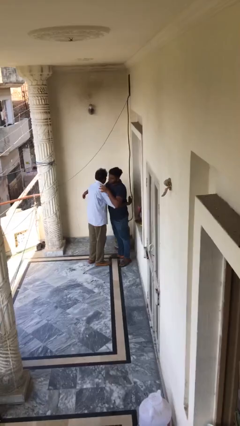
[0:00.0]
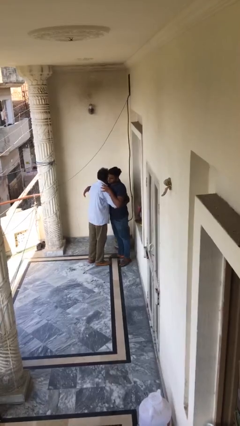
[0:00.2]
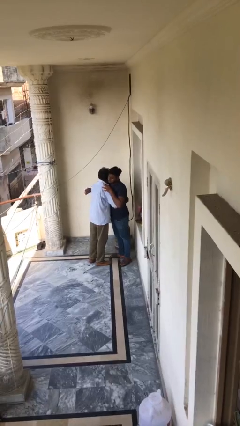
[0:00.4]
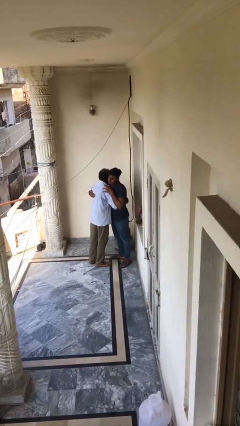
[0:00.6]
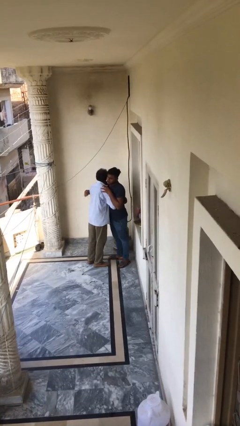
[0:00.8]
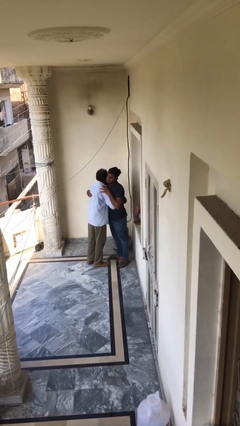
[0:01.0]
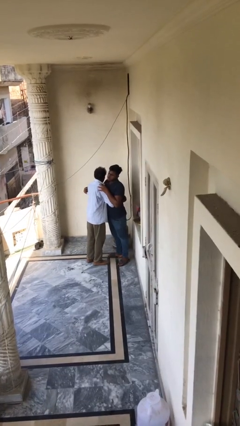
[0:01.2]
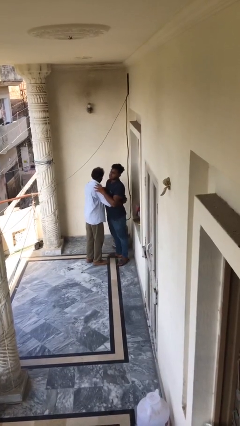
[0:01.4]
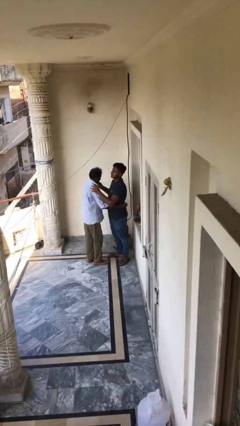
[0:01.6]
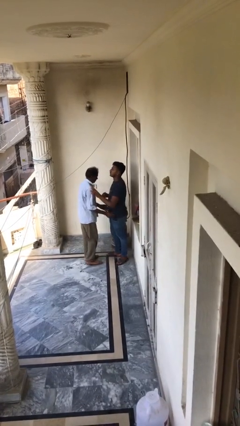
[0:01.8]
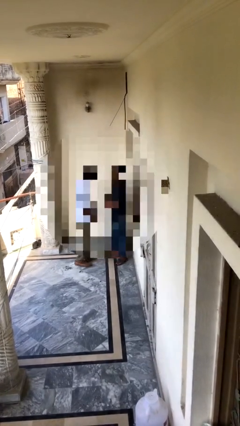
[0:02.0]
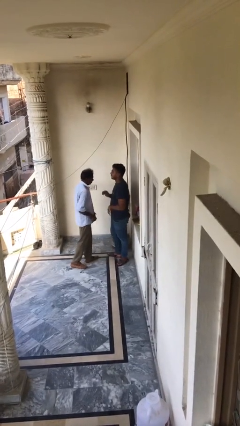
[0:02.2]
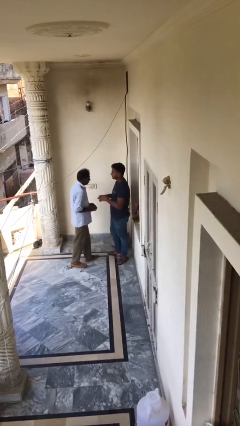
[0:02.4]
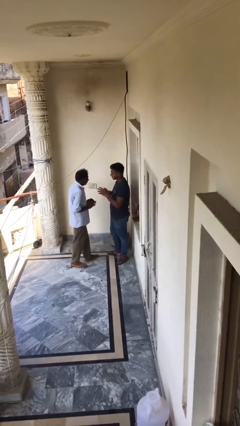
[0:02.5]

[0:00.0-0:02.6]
person embraces person

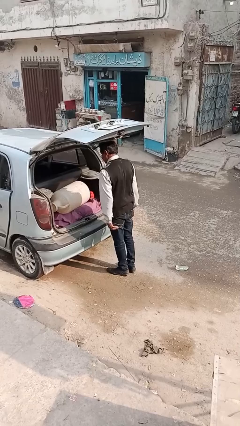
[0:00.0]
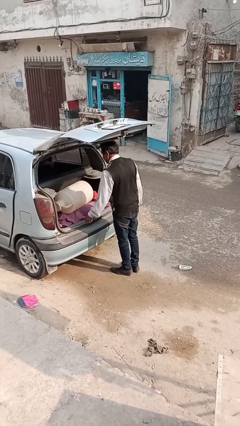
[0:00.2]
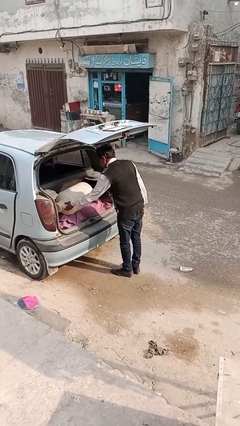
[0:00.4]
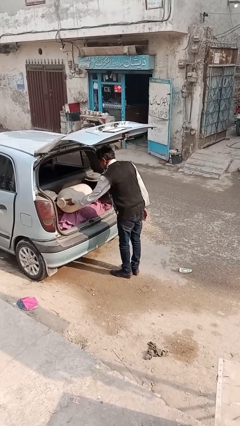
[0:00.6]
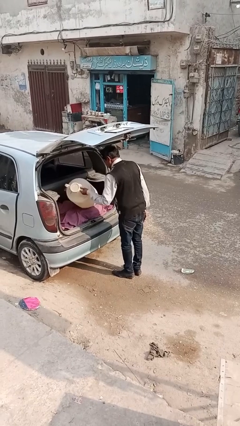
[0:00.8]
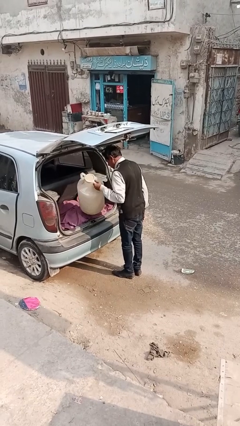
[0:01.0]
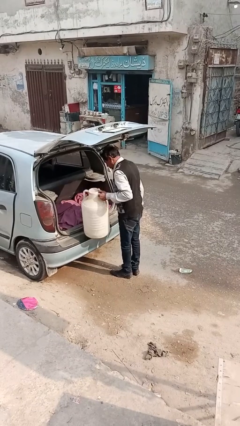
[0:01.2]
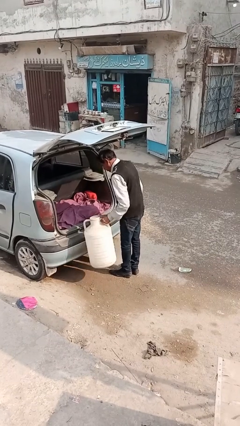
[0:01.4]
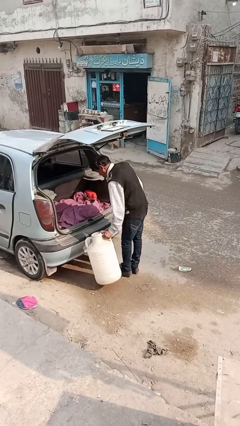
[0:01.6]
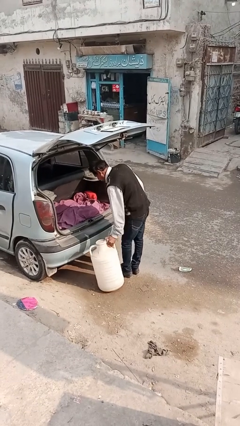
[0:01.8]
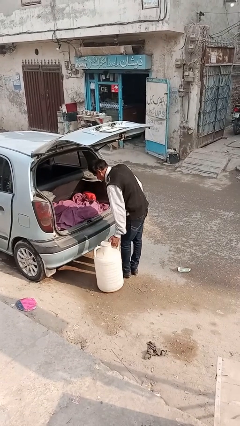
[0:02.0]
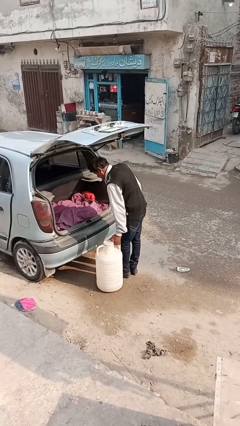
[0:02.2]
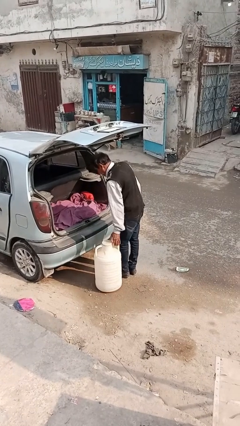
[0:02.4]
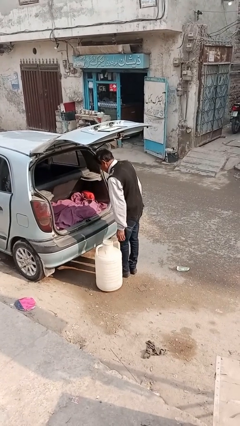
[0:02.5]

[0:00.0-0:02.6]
person unloads car

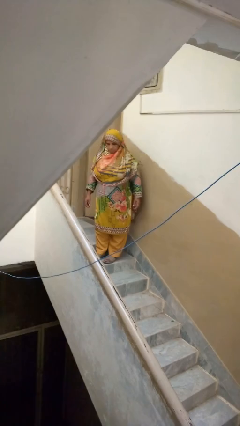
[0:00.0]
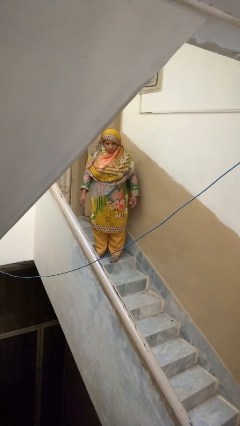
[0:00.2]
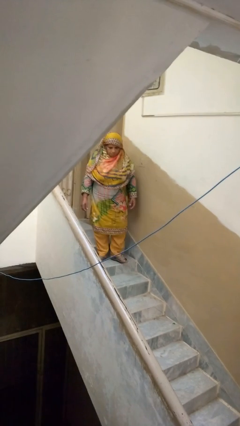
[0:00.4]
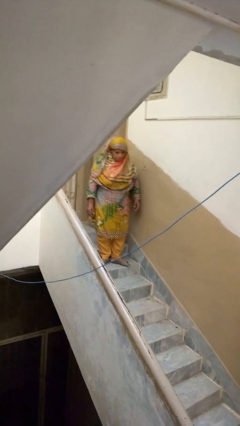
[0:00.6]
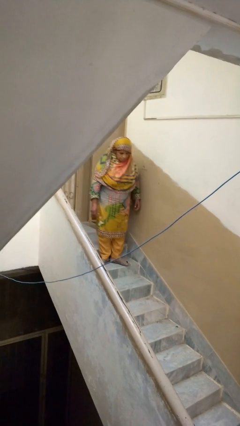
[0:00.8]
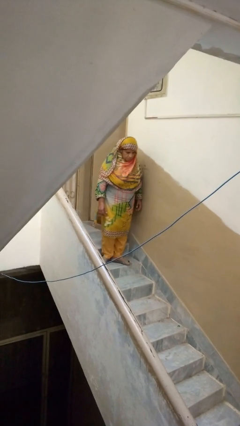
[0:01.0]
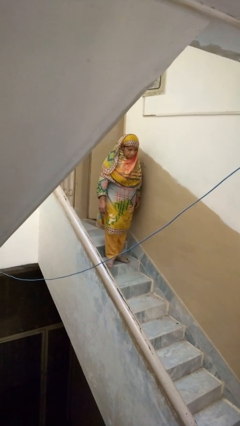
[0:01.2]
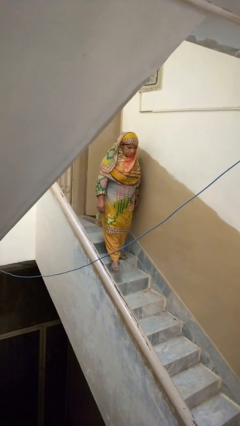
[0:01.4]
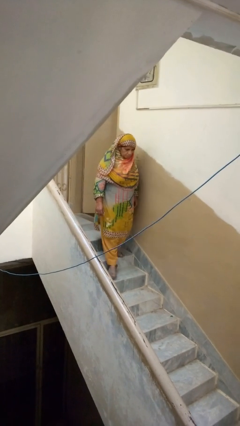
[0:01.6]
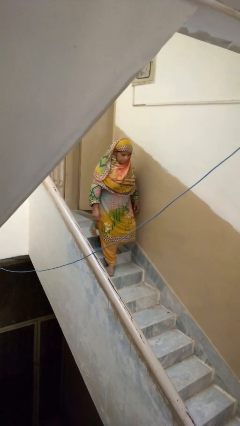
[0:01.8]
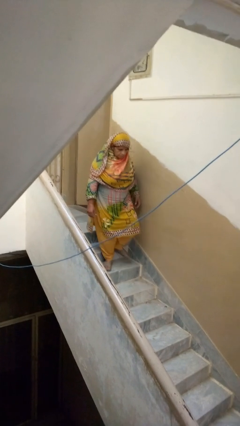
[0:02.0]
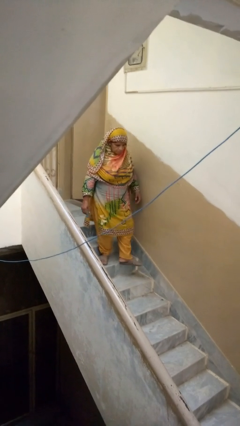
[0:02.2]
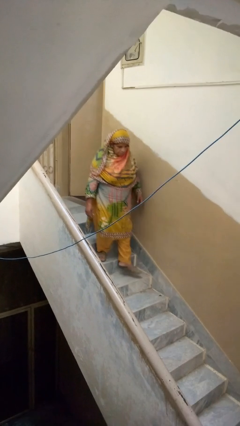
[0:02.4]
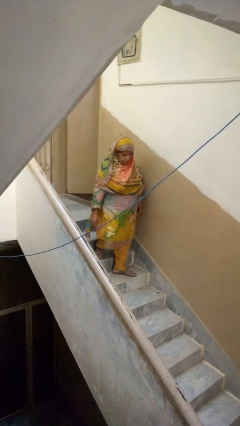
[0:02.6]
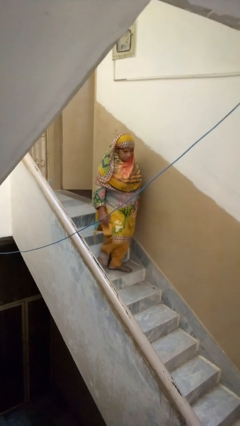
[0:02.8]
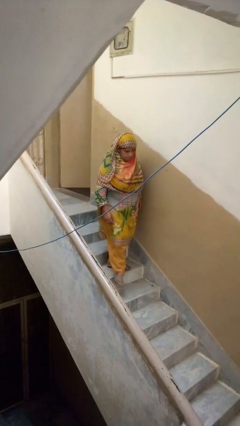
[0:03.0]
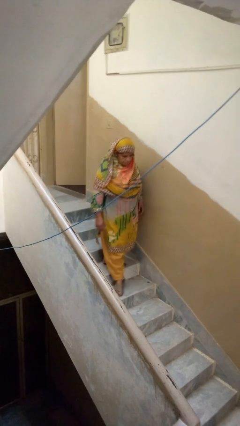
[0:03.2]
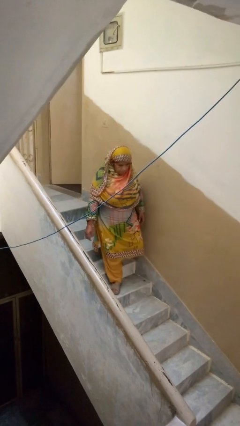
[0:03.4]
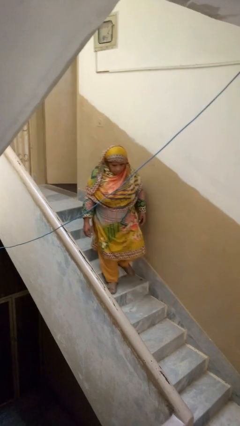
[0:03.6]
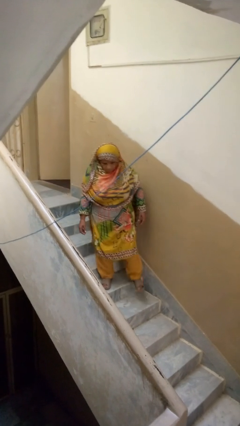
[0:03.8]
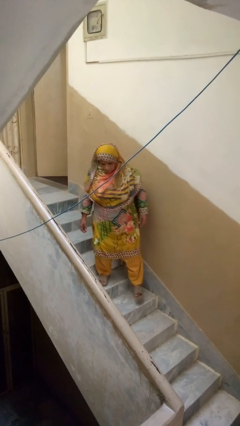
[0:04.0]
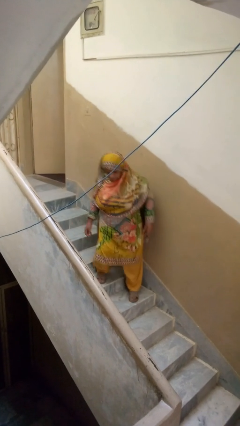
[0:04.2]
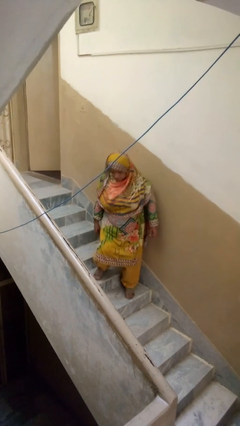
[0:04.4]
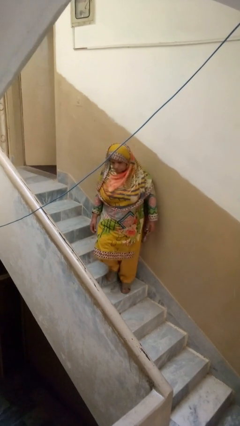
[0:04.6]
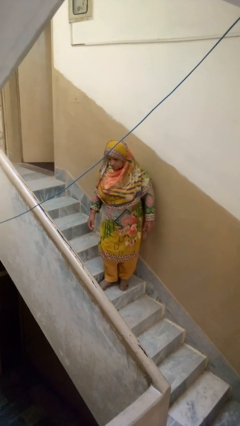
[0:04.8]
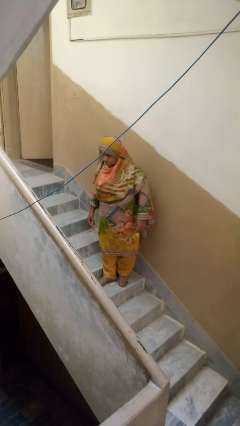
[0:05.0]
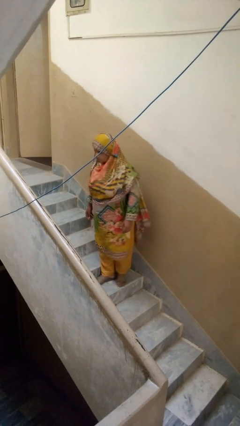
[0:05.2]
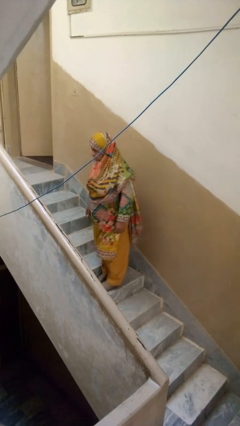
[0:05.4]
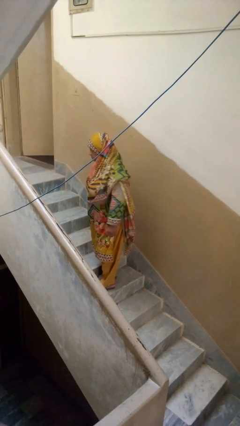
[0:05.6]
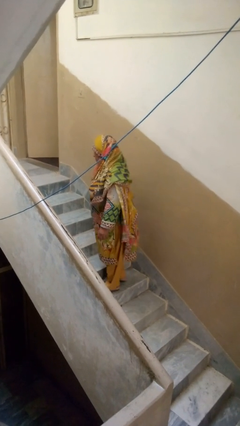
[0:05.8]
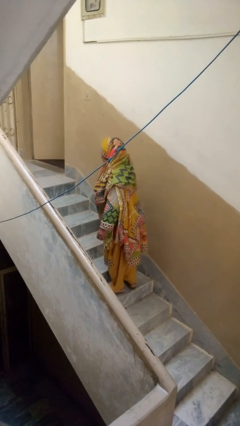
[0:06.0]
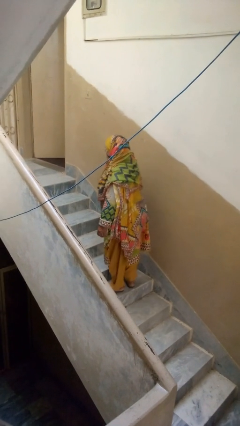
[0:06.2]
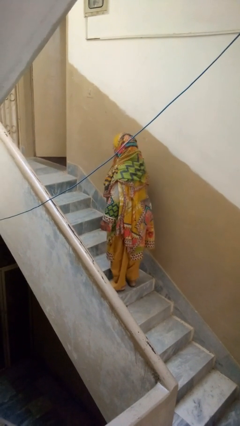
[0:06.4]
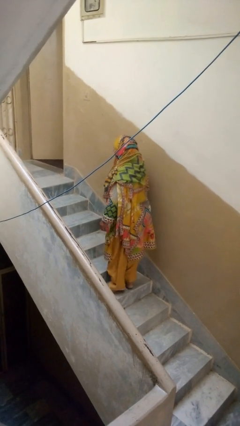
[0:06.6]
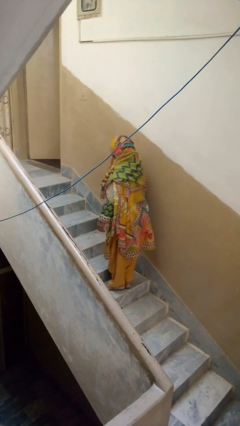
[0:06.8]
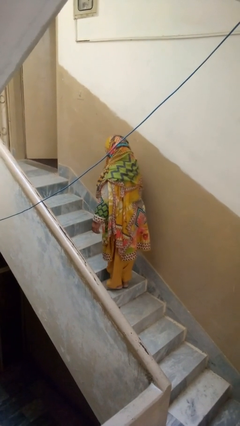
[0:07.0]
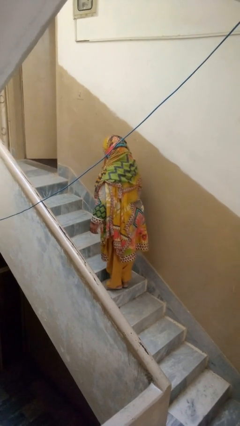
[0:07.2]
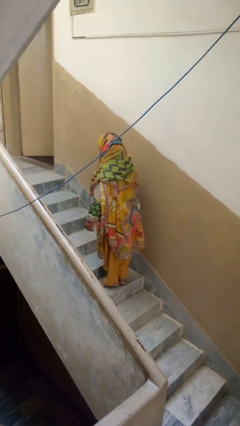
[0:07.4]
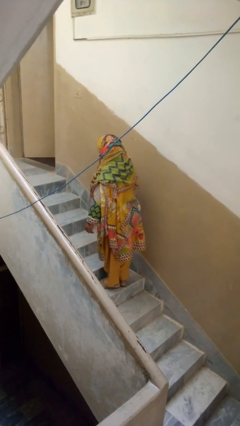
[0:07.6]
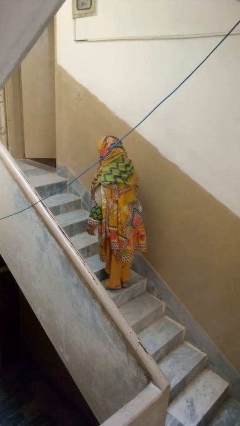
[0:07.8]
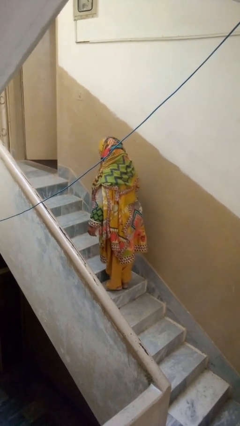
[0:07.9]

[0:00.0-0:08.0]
person climbs down stairs

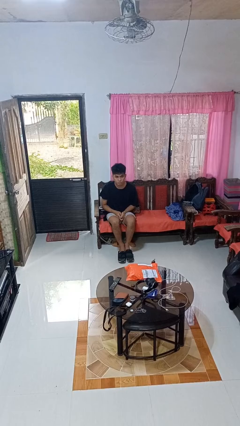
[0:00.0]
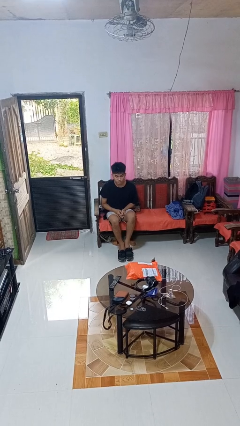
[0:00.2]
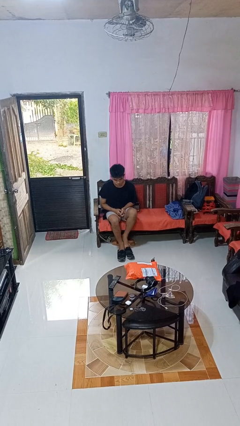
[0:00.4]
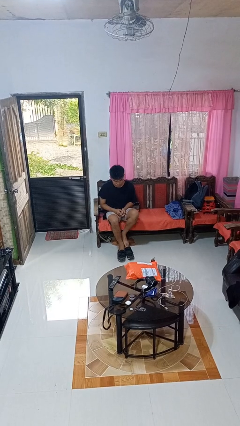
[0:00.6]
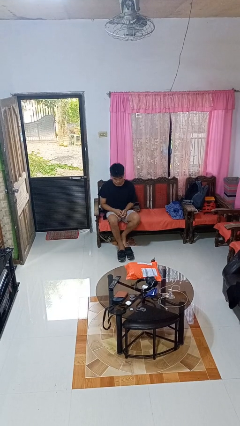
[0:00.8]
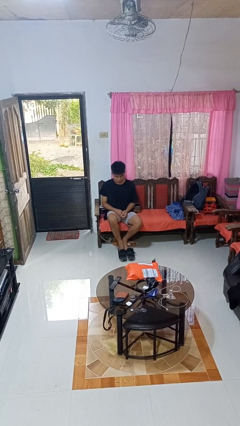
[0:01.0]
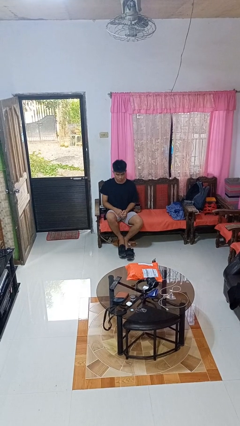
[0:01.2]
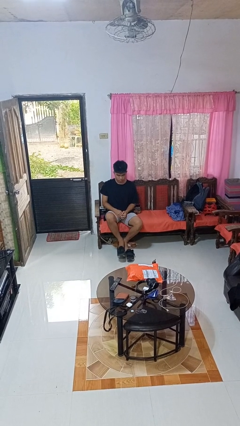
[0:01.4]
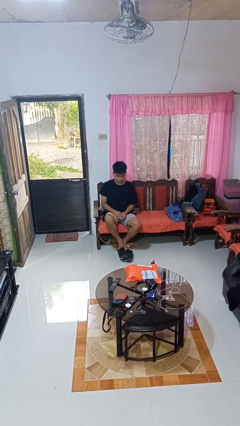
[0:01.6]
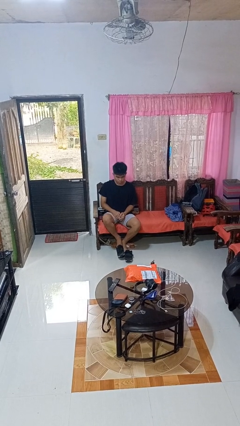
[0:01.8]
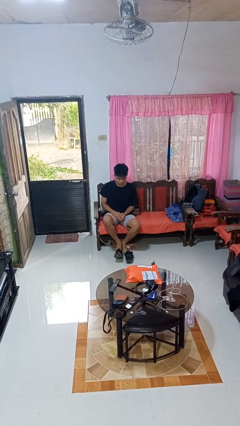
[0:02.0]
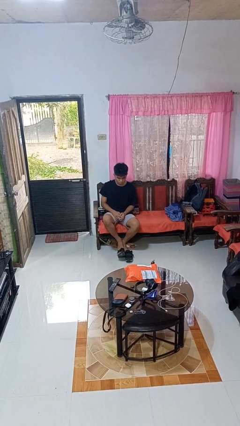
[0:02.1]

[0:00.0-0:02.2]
person takes off shoes

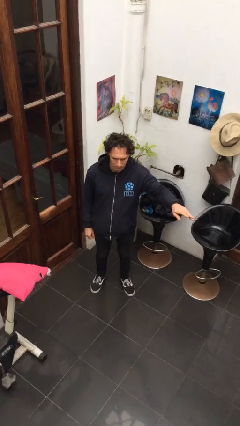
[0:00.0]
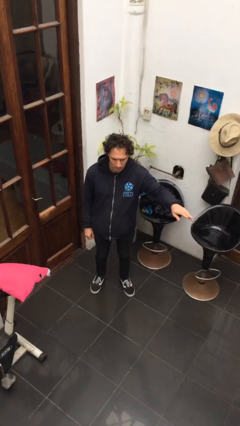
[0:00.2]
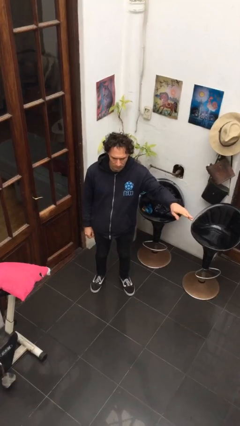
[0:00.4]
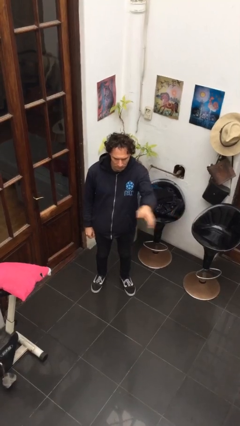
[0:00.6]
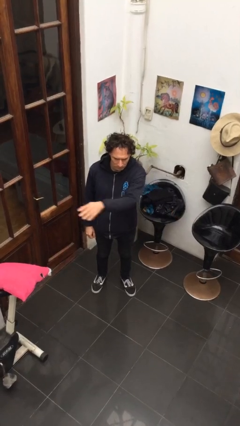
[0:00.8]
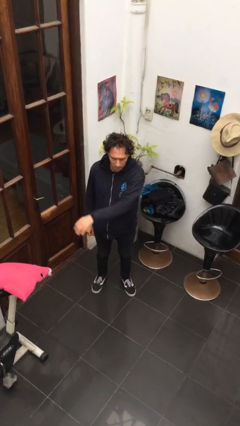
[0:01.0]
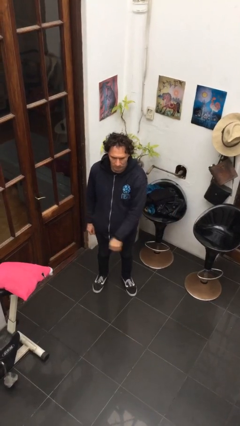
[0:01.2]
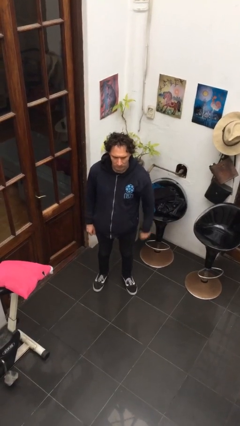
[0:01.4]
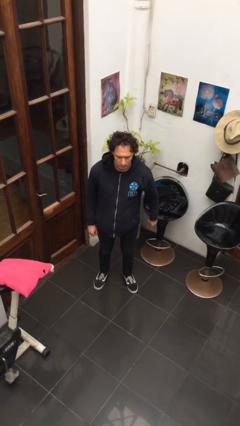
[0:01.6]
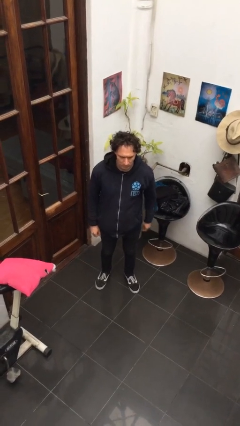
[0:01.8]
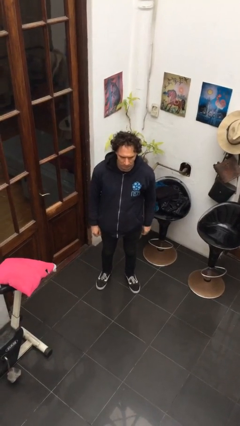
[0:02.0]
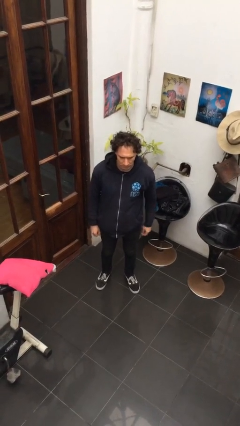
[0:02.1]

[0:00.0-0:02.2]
person gestures swipe right
